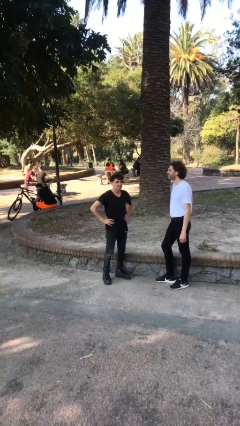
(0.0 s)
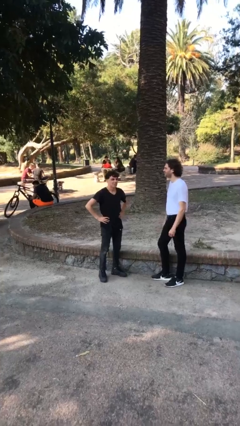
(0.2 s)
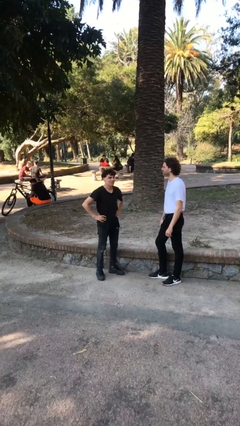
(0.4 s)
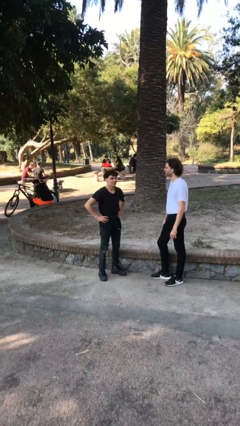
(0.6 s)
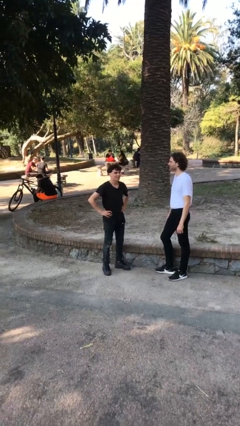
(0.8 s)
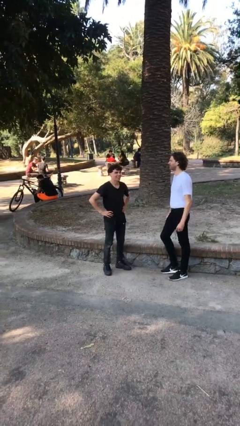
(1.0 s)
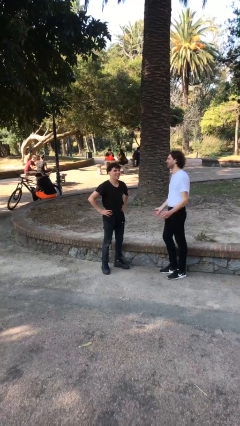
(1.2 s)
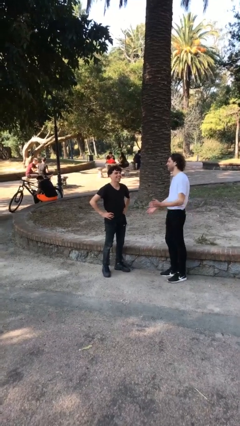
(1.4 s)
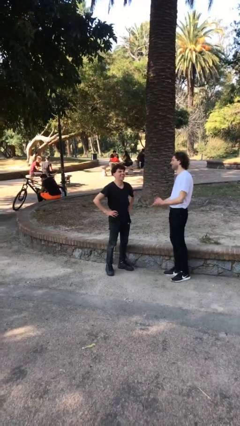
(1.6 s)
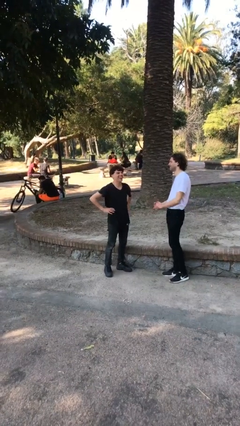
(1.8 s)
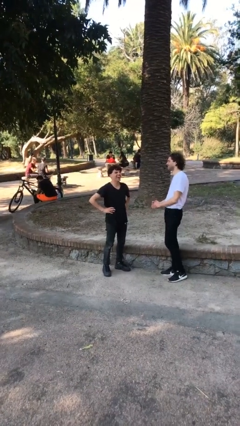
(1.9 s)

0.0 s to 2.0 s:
person laughs with person

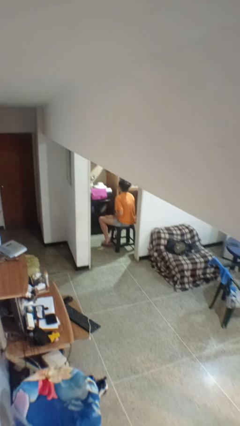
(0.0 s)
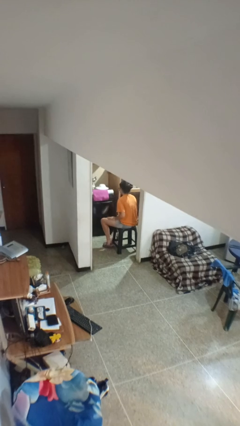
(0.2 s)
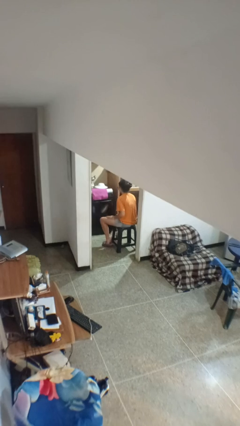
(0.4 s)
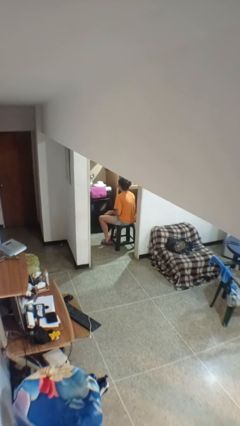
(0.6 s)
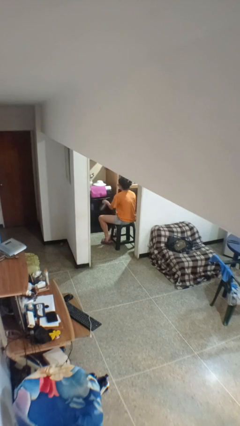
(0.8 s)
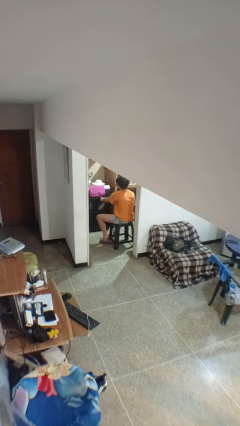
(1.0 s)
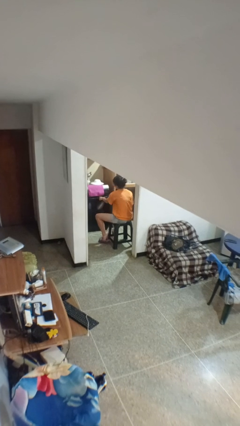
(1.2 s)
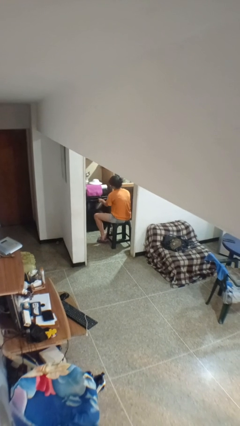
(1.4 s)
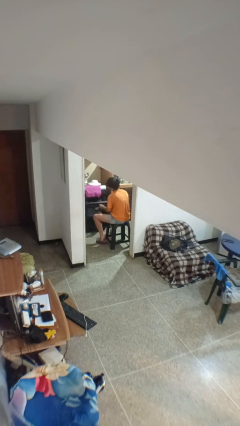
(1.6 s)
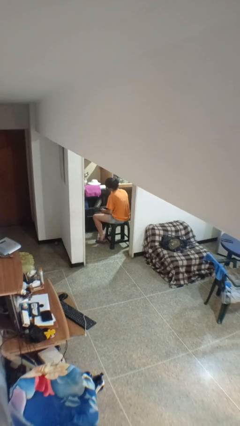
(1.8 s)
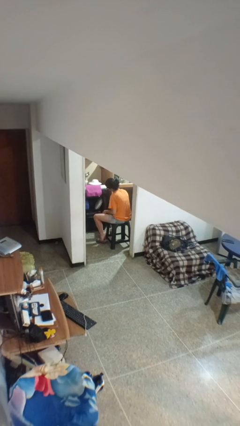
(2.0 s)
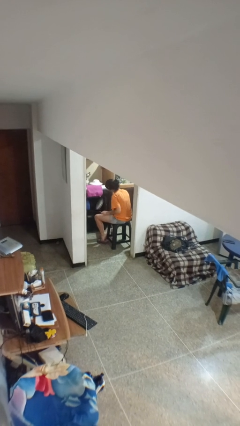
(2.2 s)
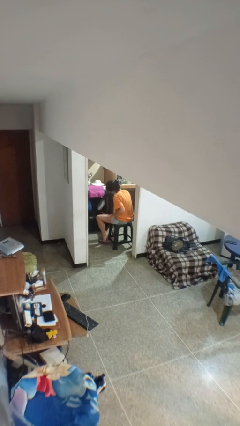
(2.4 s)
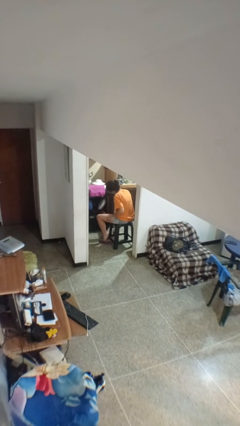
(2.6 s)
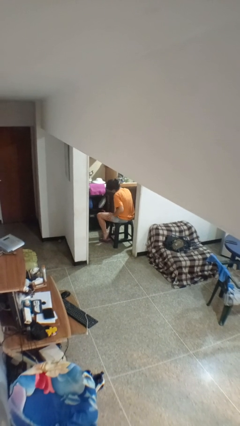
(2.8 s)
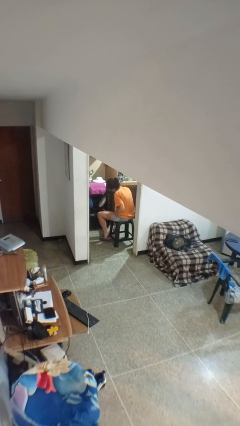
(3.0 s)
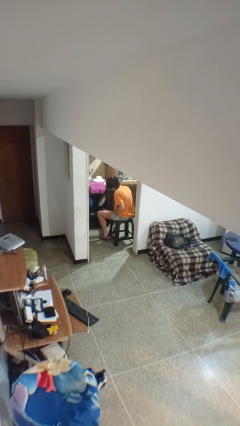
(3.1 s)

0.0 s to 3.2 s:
person opens dishwasher
